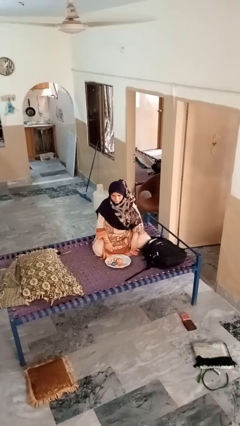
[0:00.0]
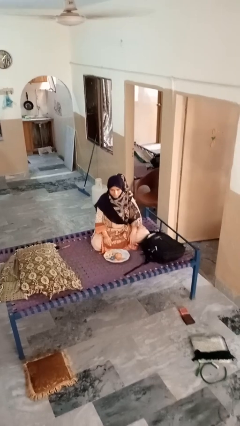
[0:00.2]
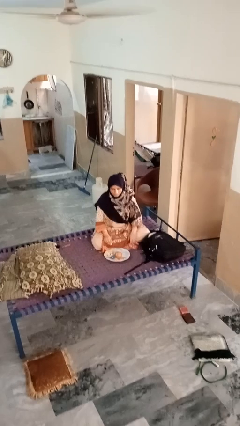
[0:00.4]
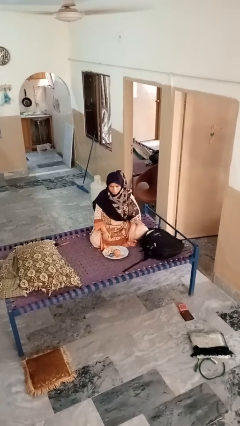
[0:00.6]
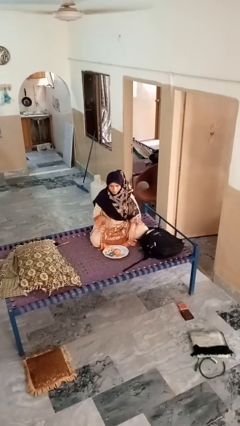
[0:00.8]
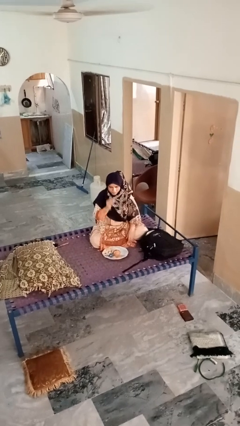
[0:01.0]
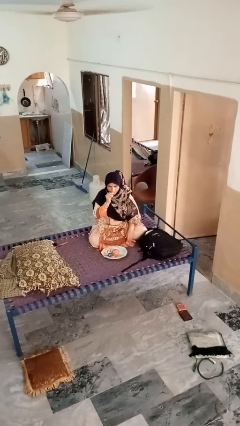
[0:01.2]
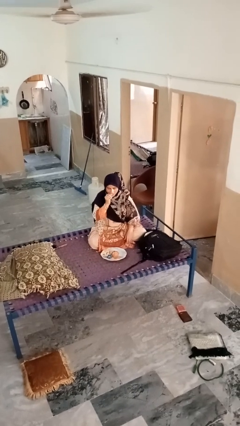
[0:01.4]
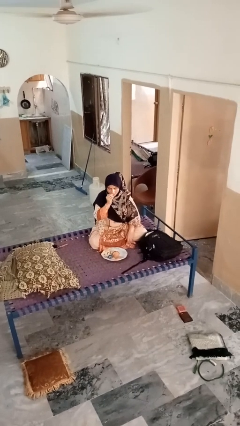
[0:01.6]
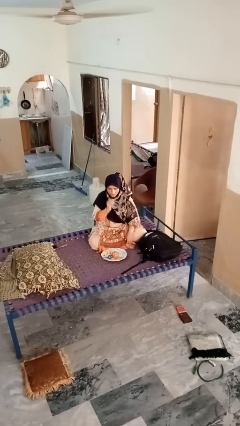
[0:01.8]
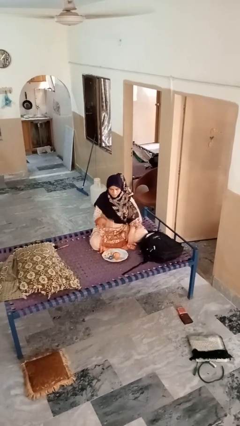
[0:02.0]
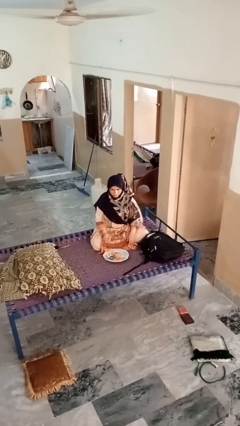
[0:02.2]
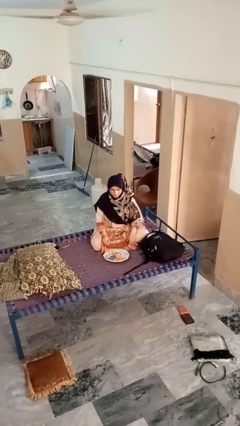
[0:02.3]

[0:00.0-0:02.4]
person eats apple

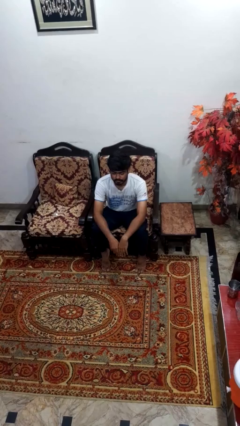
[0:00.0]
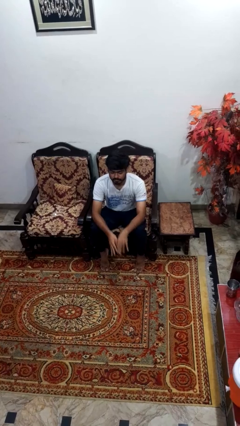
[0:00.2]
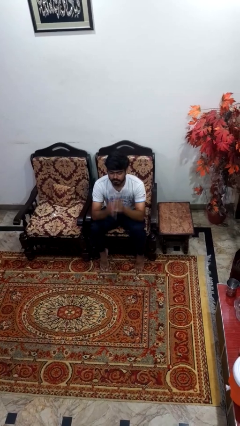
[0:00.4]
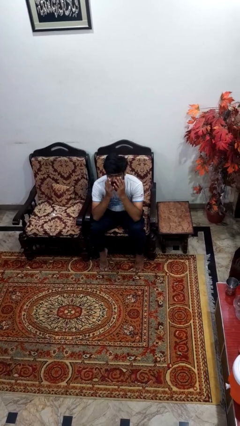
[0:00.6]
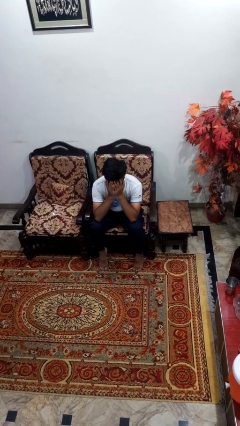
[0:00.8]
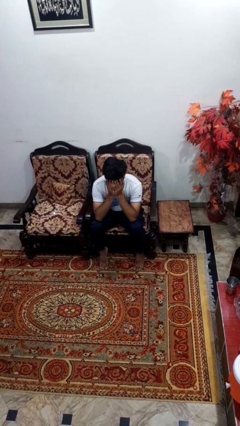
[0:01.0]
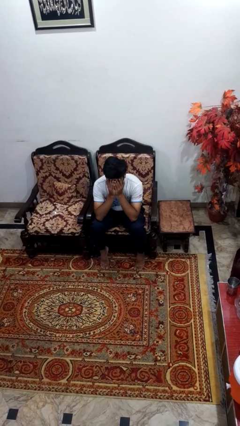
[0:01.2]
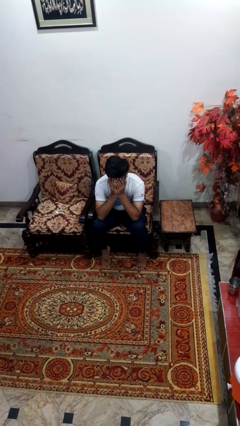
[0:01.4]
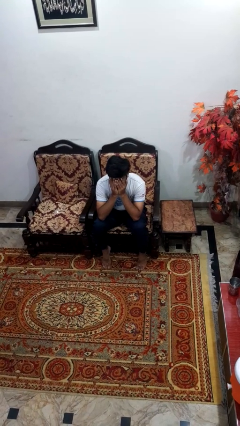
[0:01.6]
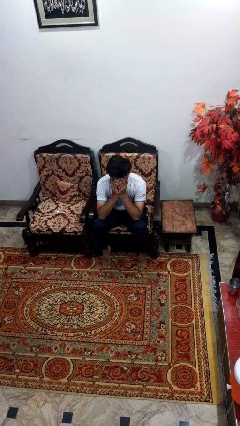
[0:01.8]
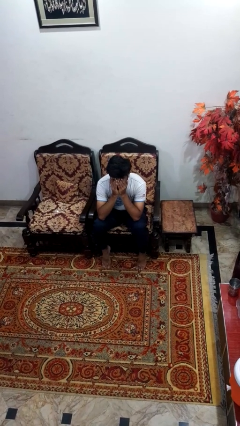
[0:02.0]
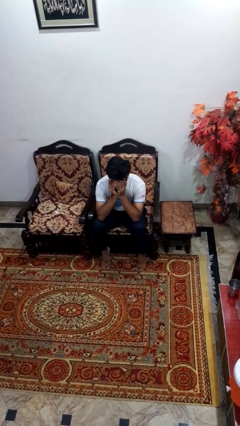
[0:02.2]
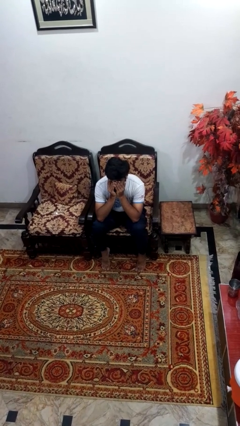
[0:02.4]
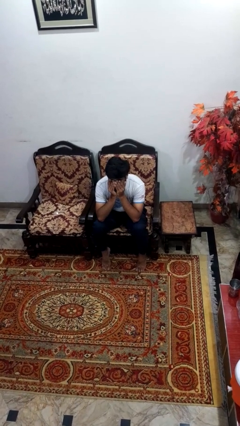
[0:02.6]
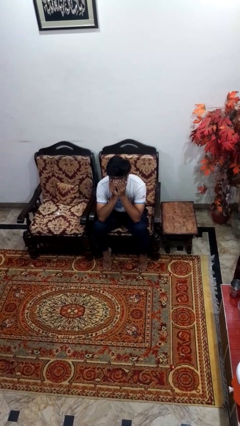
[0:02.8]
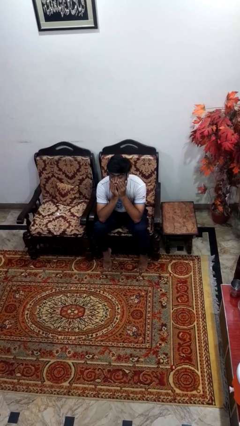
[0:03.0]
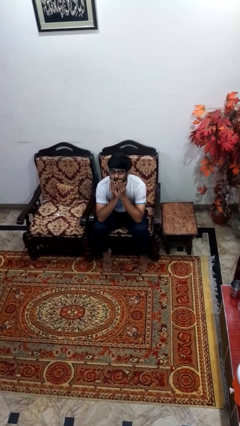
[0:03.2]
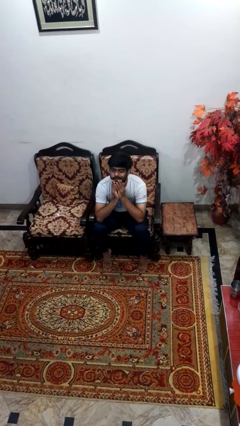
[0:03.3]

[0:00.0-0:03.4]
person covers face with hands

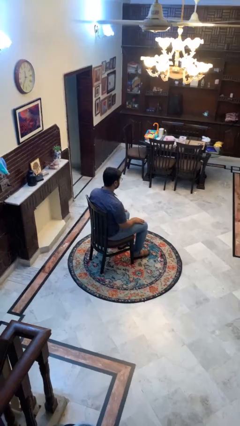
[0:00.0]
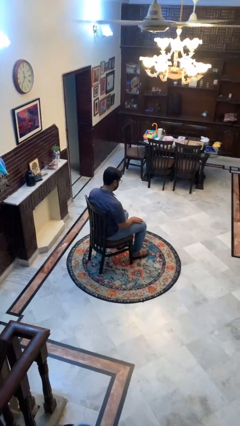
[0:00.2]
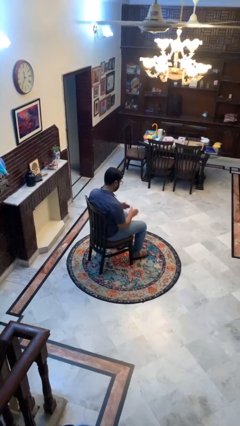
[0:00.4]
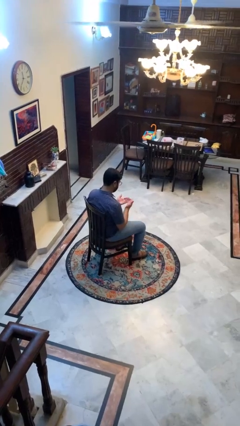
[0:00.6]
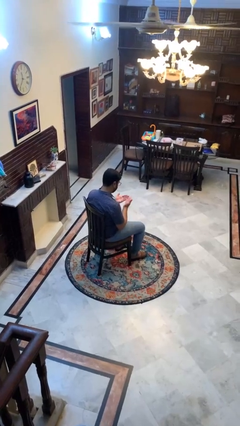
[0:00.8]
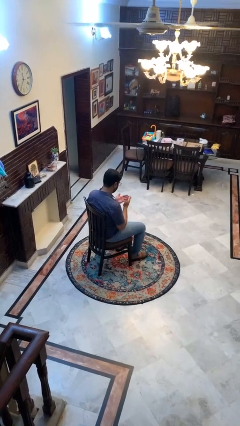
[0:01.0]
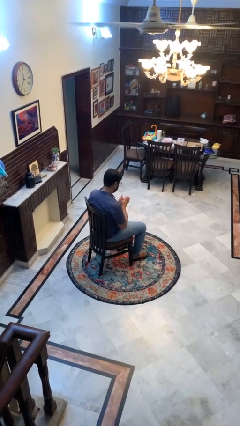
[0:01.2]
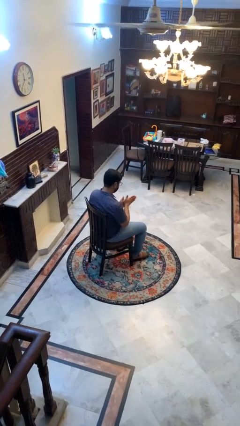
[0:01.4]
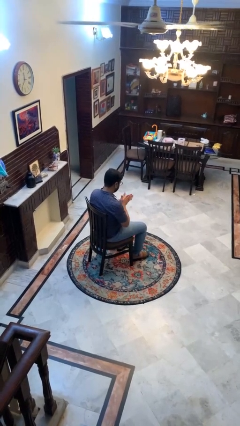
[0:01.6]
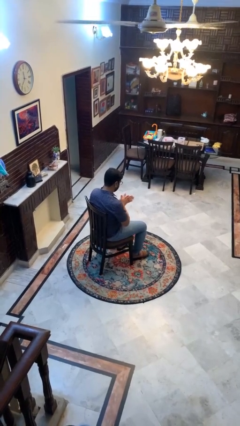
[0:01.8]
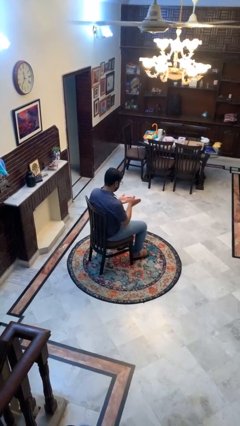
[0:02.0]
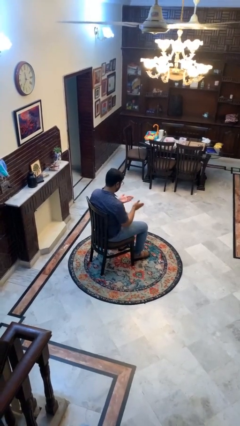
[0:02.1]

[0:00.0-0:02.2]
person looks at hands in lap

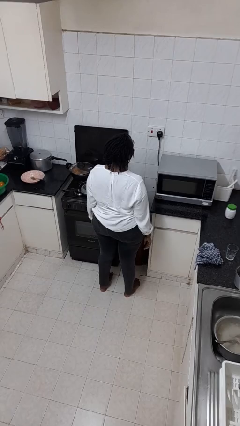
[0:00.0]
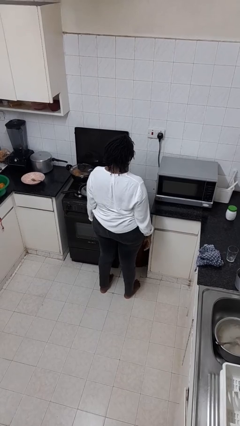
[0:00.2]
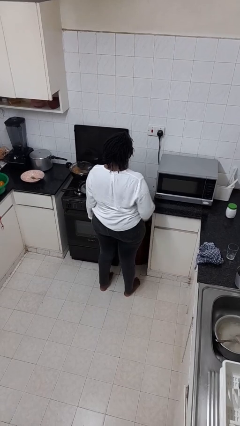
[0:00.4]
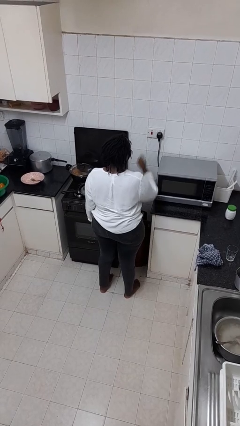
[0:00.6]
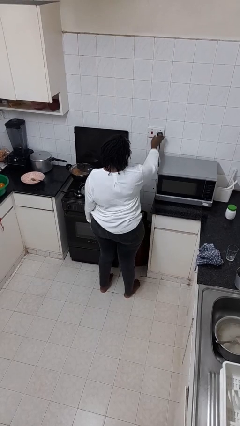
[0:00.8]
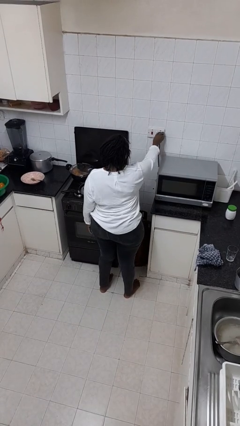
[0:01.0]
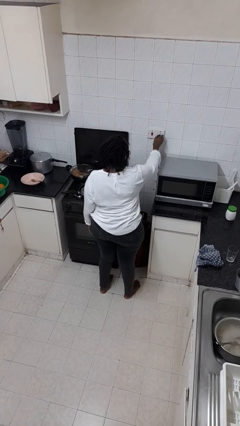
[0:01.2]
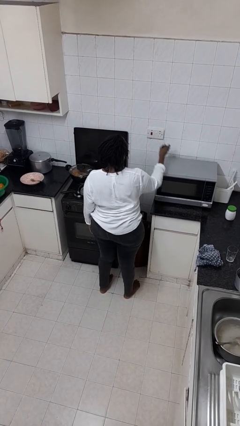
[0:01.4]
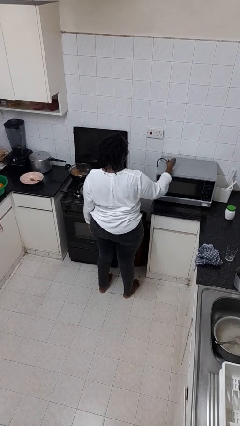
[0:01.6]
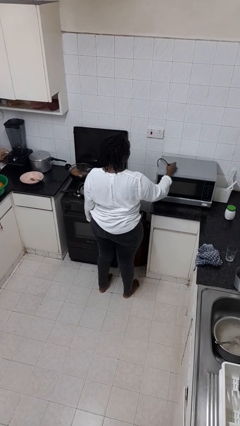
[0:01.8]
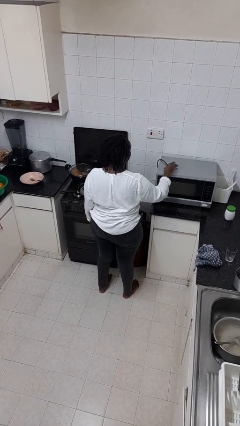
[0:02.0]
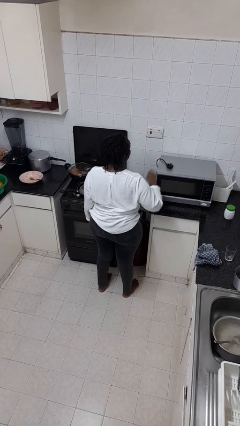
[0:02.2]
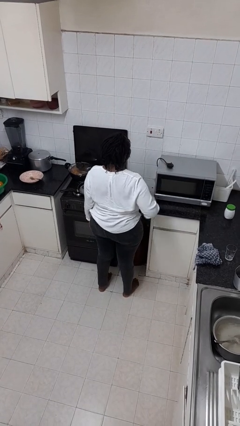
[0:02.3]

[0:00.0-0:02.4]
person unplugs from electrical socket

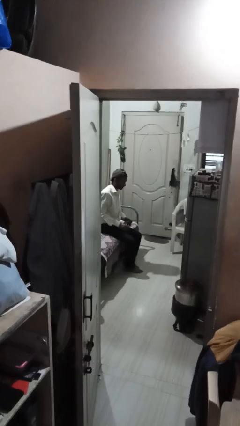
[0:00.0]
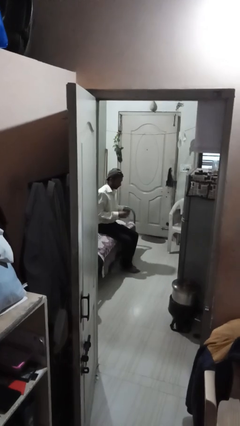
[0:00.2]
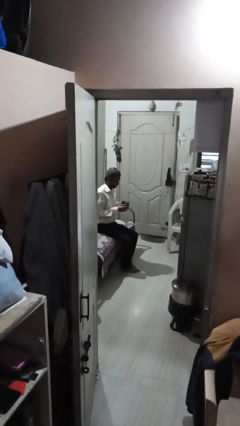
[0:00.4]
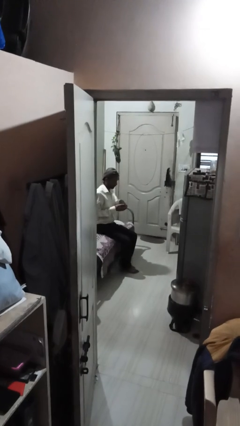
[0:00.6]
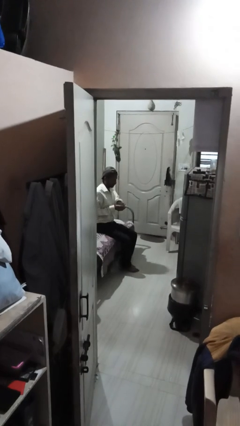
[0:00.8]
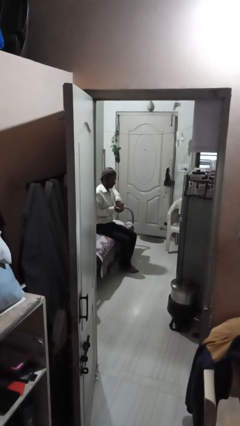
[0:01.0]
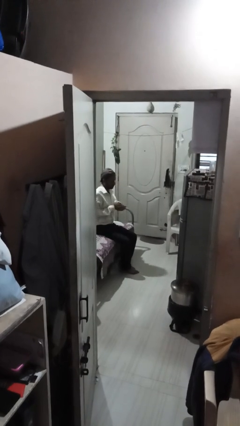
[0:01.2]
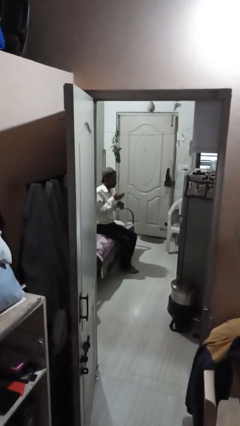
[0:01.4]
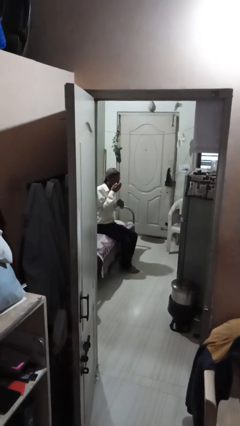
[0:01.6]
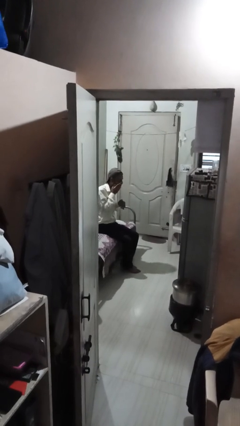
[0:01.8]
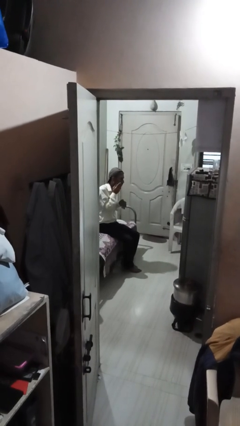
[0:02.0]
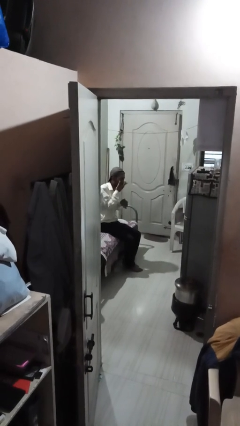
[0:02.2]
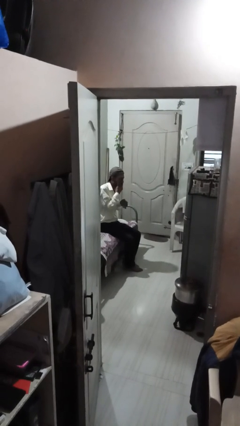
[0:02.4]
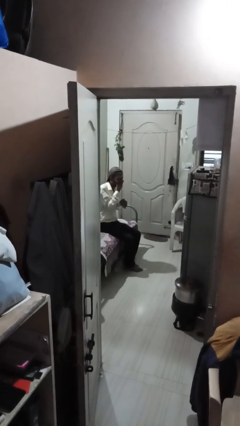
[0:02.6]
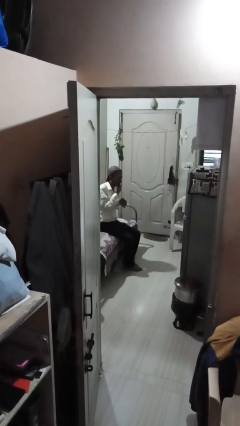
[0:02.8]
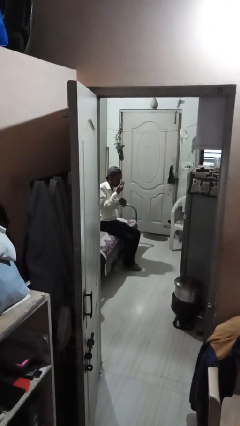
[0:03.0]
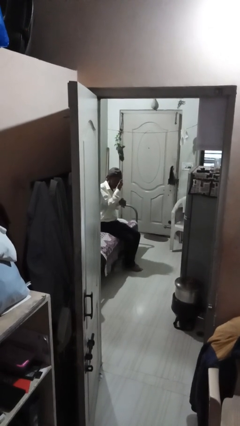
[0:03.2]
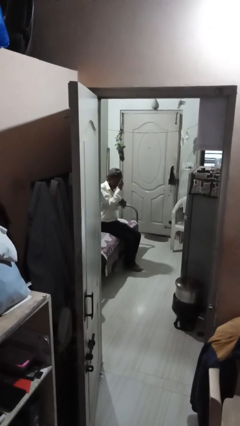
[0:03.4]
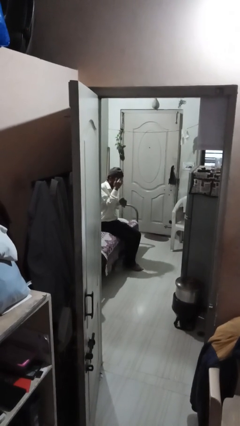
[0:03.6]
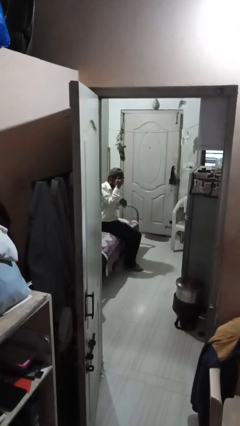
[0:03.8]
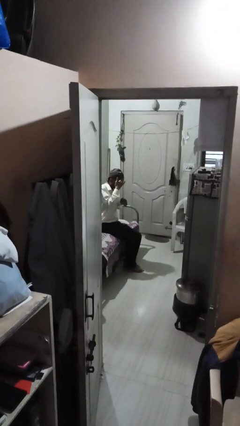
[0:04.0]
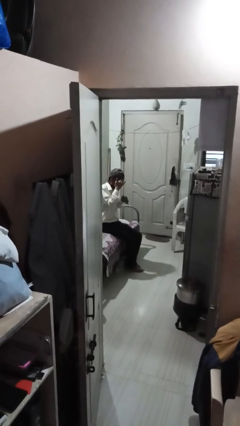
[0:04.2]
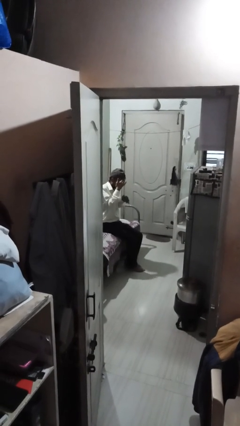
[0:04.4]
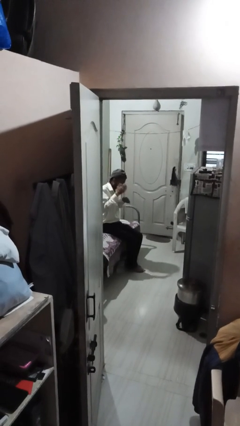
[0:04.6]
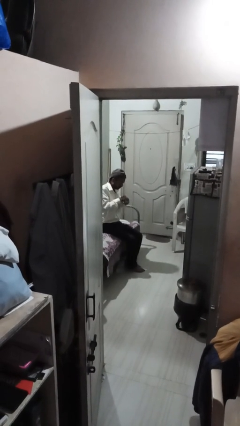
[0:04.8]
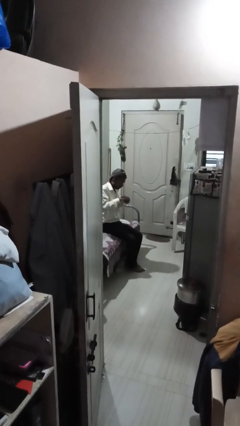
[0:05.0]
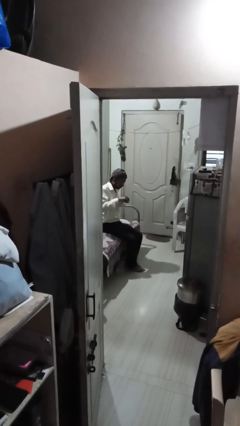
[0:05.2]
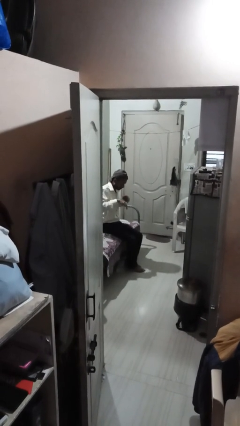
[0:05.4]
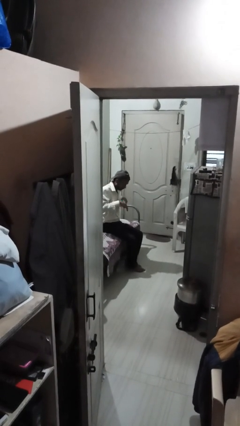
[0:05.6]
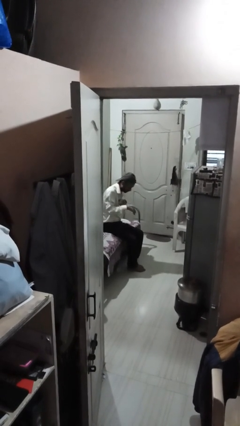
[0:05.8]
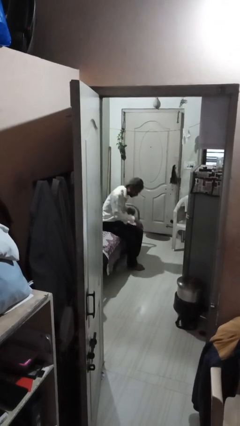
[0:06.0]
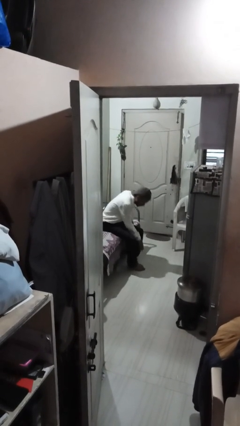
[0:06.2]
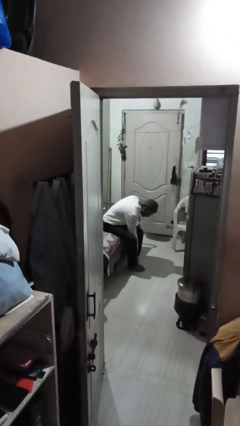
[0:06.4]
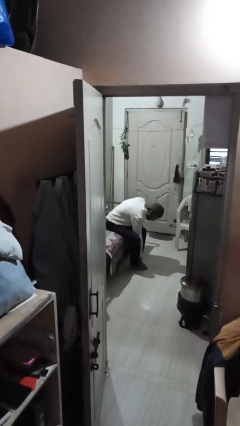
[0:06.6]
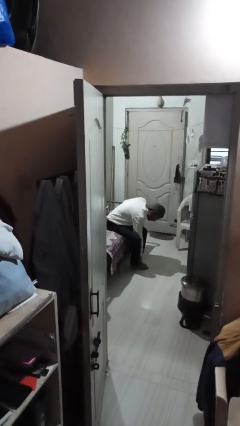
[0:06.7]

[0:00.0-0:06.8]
person applies facial moisturizer
